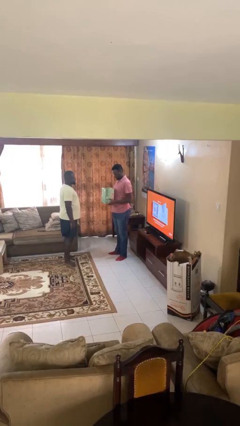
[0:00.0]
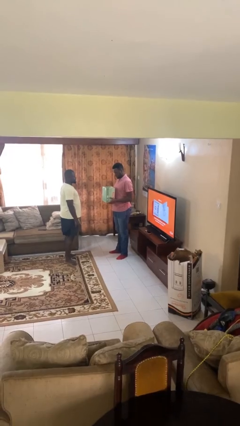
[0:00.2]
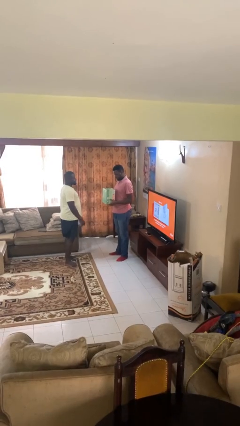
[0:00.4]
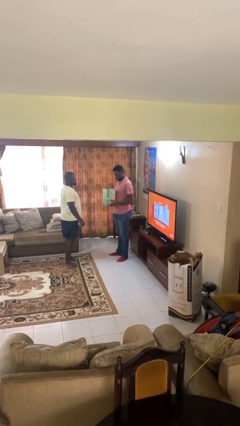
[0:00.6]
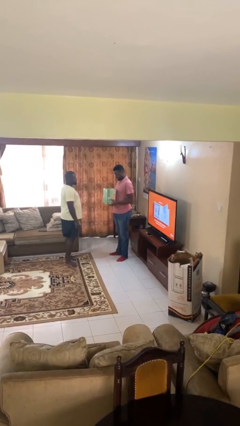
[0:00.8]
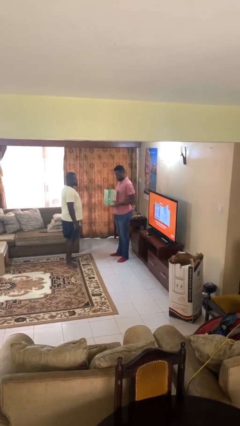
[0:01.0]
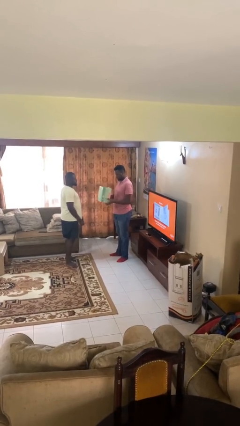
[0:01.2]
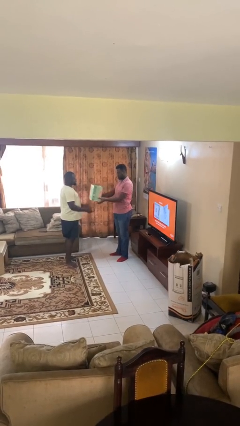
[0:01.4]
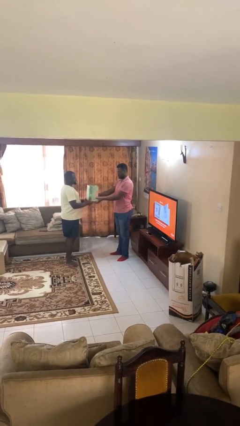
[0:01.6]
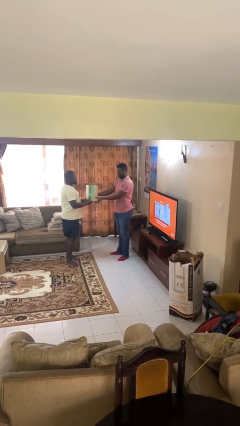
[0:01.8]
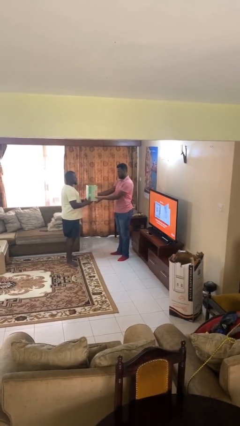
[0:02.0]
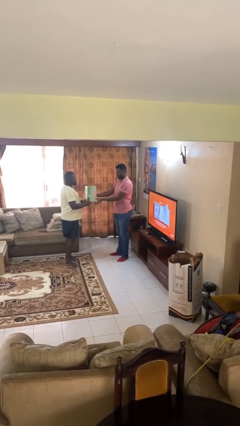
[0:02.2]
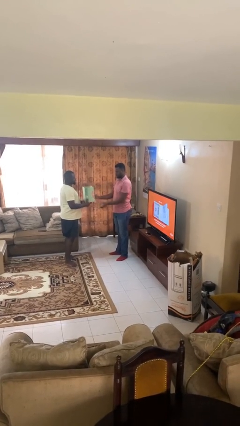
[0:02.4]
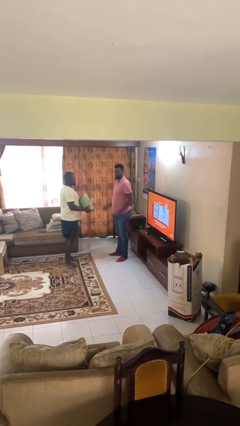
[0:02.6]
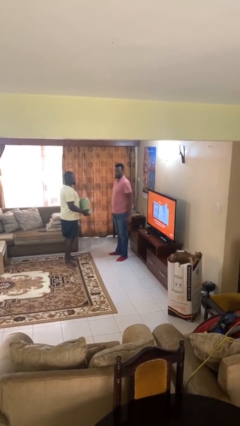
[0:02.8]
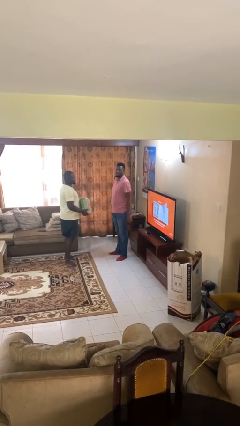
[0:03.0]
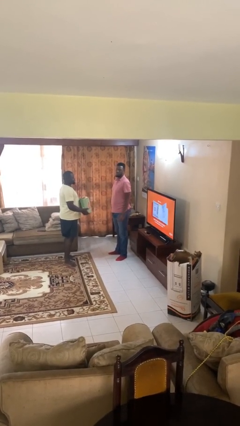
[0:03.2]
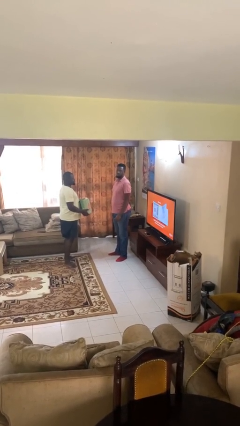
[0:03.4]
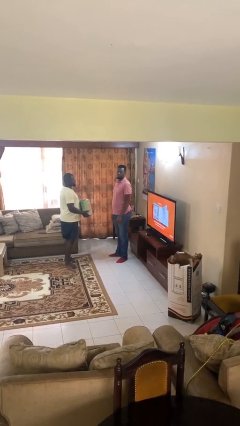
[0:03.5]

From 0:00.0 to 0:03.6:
person transfers object to person

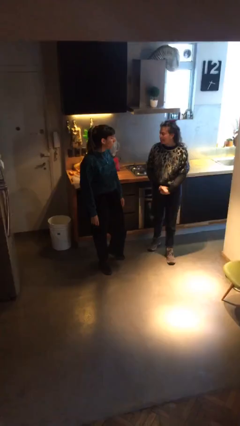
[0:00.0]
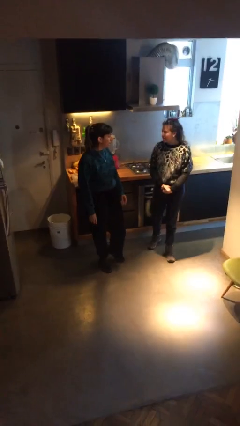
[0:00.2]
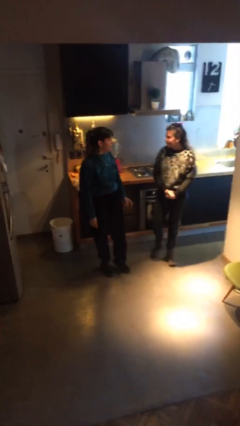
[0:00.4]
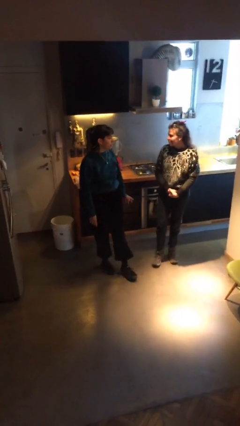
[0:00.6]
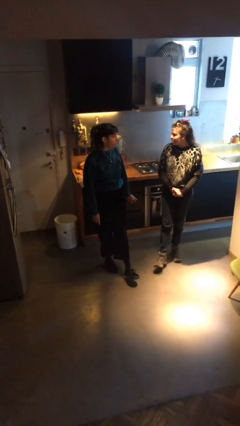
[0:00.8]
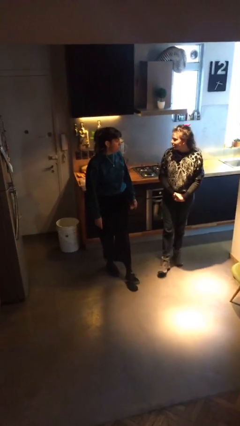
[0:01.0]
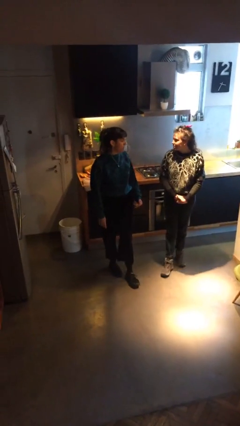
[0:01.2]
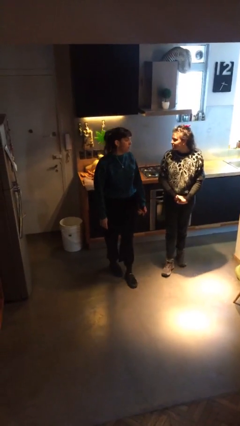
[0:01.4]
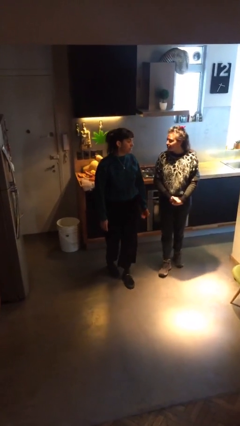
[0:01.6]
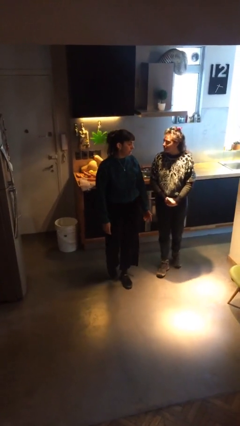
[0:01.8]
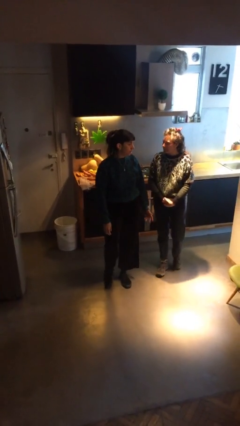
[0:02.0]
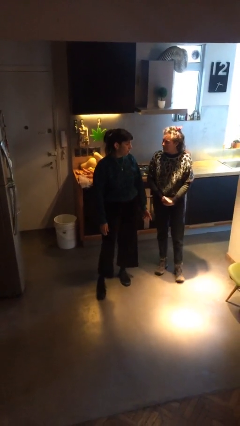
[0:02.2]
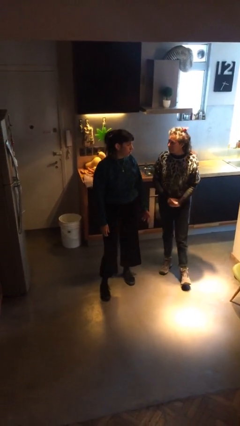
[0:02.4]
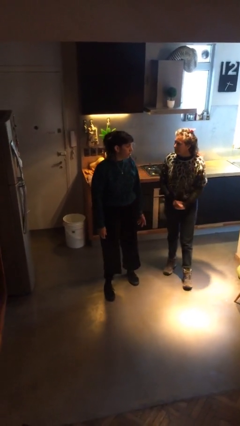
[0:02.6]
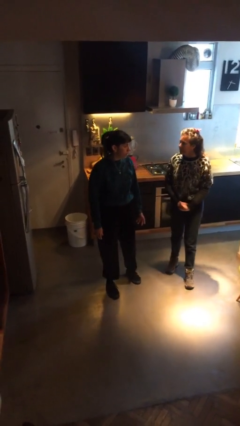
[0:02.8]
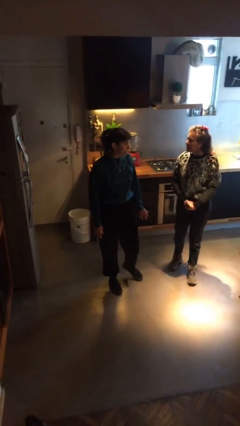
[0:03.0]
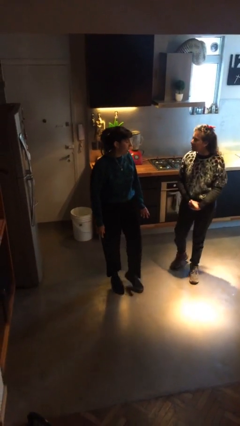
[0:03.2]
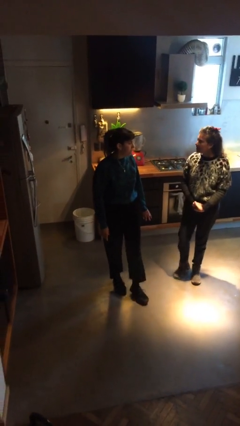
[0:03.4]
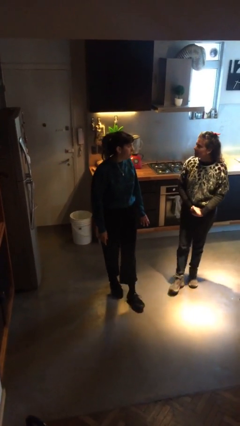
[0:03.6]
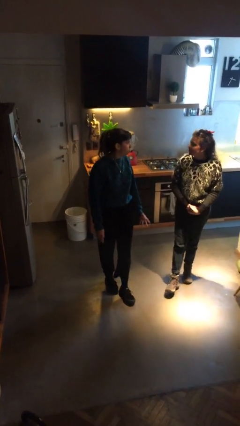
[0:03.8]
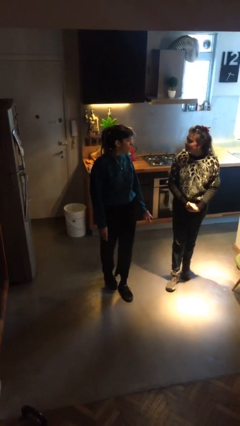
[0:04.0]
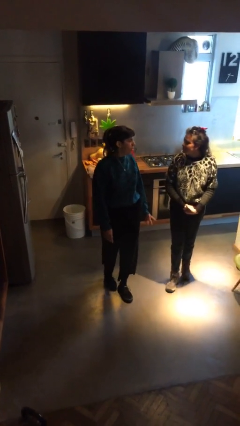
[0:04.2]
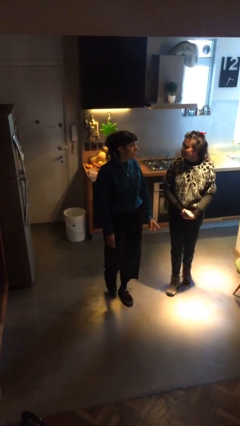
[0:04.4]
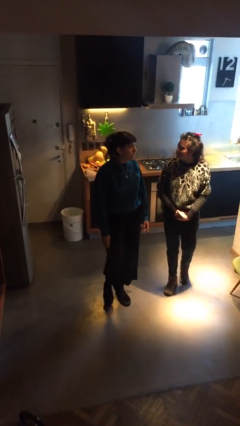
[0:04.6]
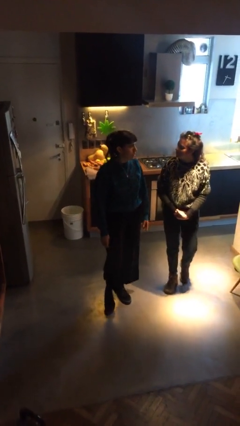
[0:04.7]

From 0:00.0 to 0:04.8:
person talks to person

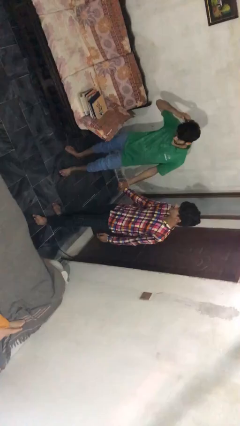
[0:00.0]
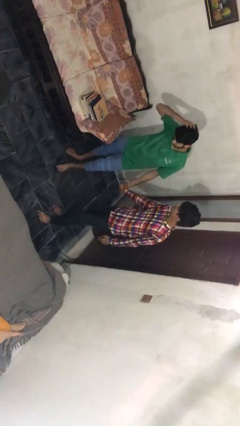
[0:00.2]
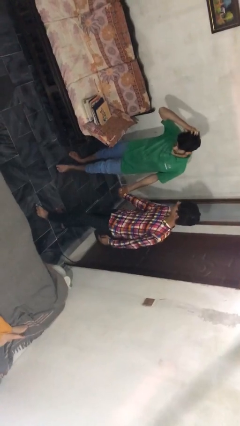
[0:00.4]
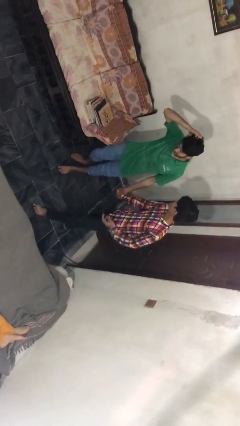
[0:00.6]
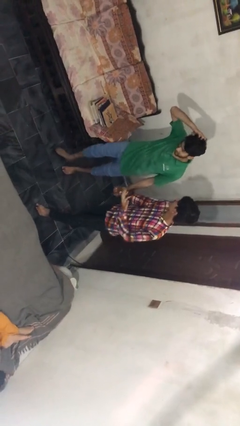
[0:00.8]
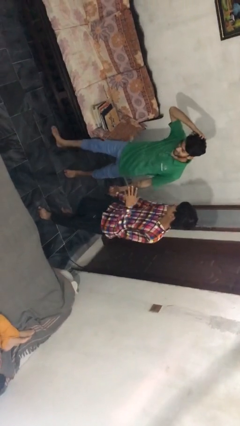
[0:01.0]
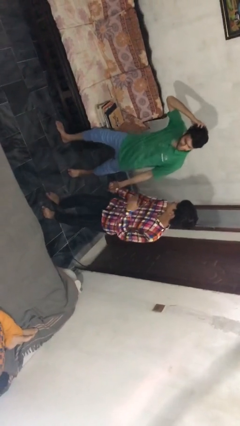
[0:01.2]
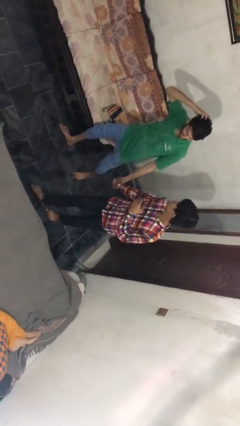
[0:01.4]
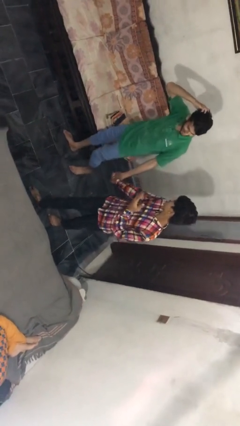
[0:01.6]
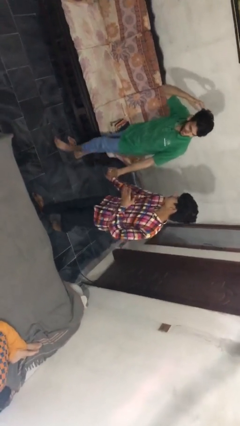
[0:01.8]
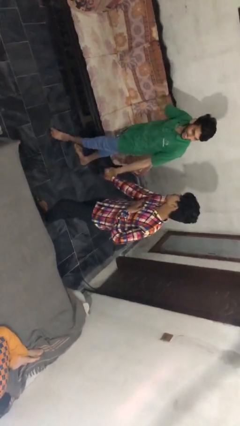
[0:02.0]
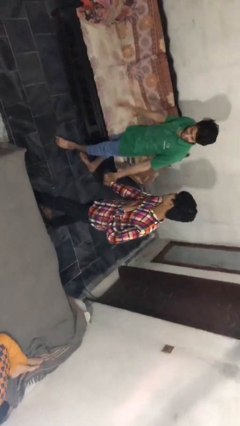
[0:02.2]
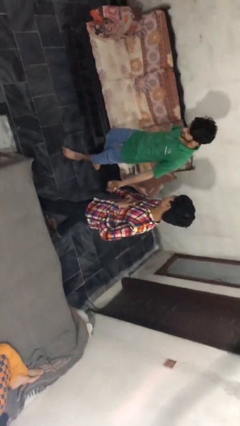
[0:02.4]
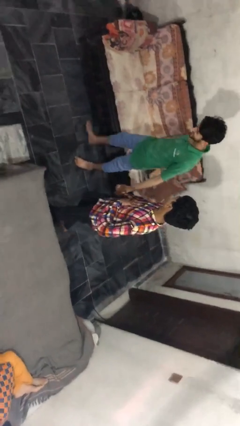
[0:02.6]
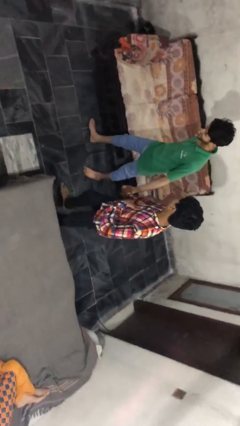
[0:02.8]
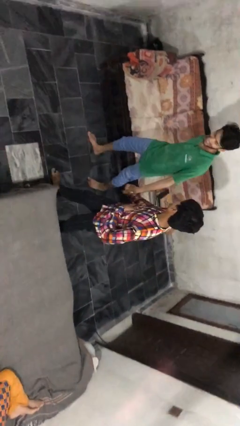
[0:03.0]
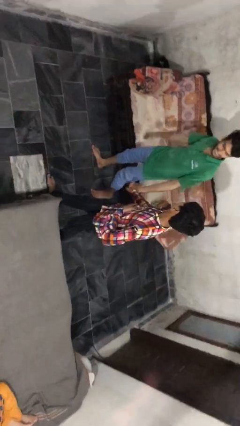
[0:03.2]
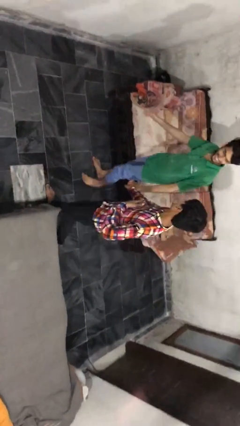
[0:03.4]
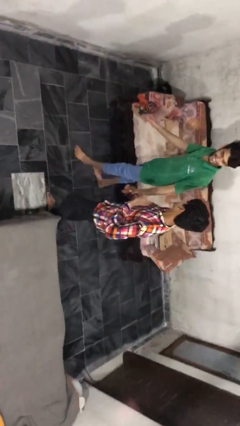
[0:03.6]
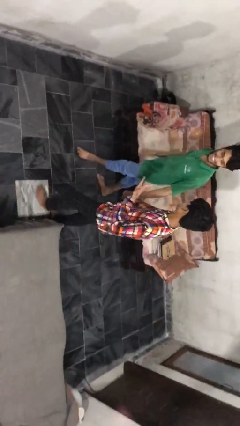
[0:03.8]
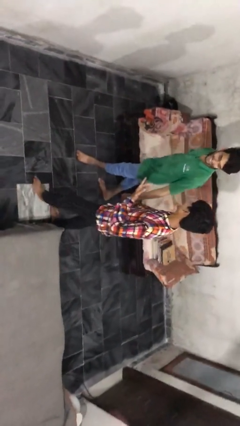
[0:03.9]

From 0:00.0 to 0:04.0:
person holds hand

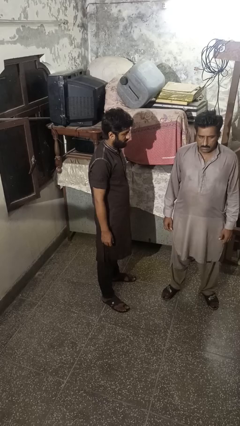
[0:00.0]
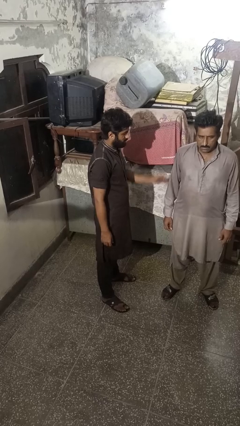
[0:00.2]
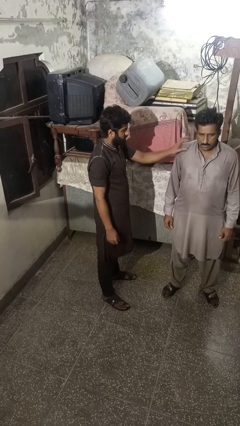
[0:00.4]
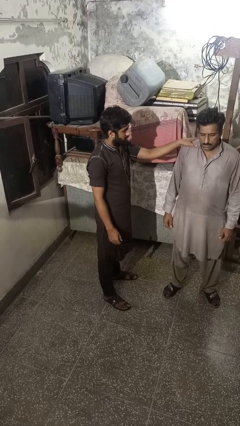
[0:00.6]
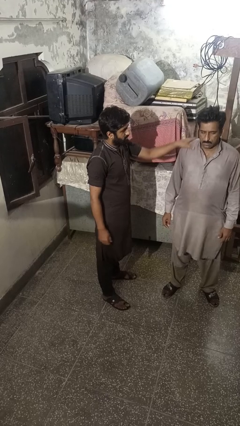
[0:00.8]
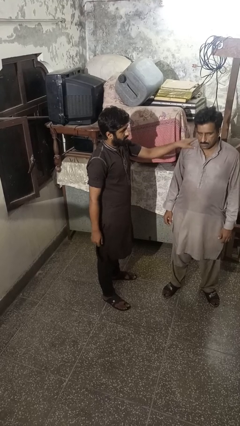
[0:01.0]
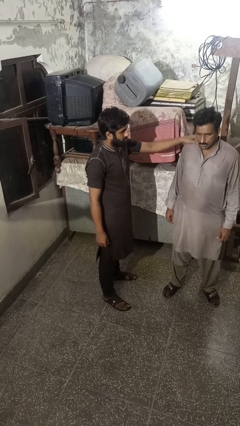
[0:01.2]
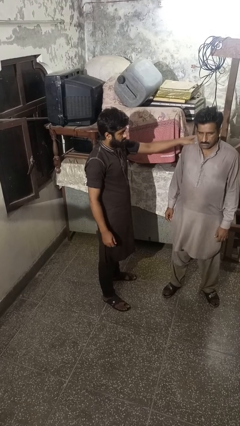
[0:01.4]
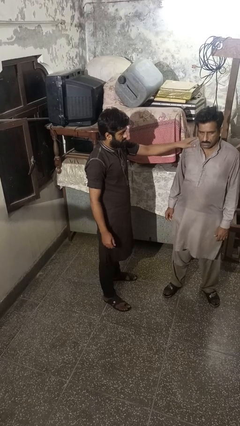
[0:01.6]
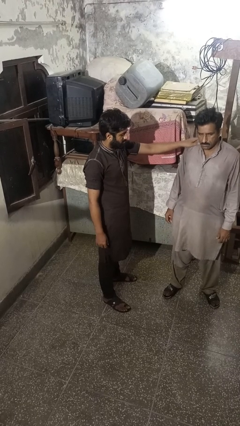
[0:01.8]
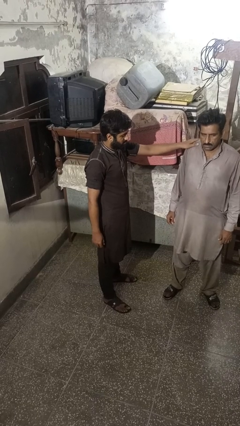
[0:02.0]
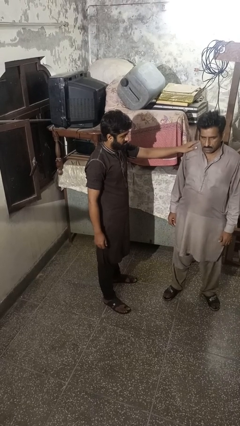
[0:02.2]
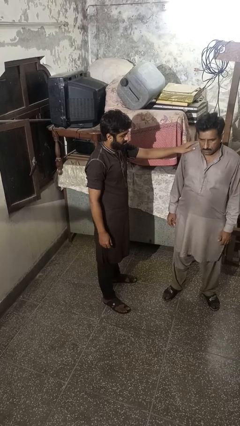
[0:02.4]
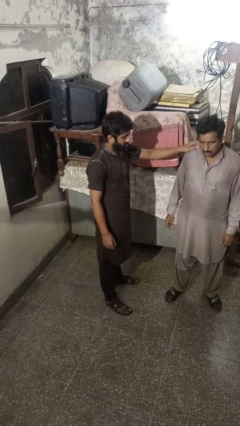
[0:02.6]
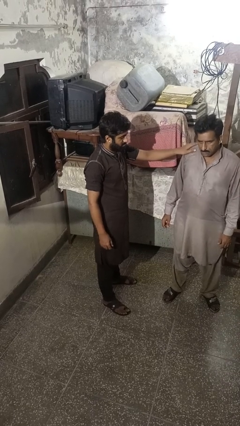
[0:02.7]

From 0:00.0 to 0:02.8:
person grabs person by shoulder

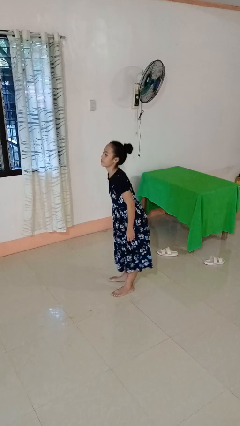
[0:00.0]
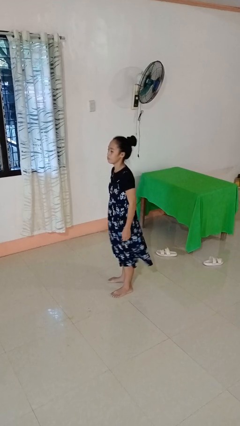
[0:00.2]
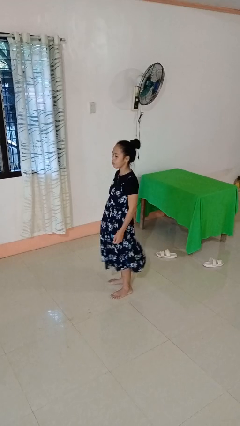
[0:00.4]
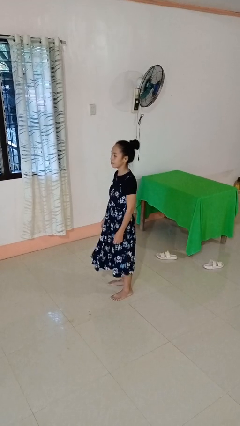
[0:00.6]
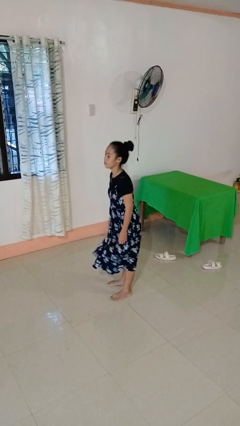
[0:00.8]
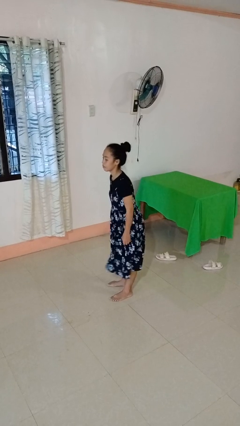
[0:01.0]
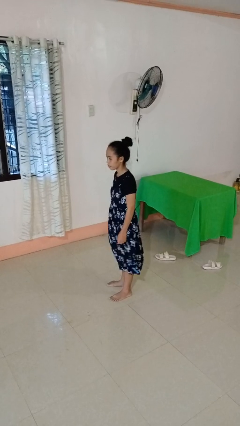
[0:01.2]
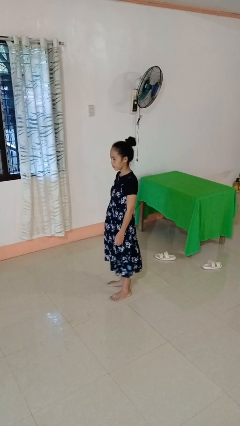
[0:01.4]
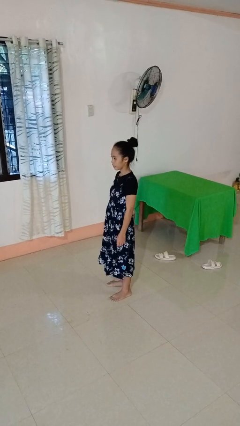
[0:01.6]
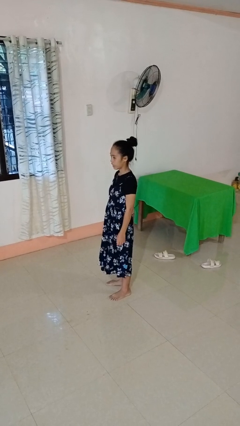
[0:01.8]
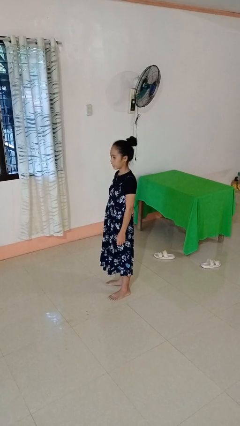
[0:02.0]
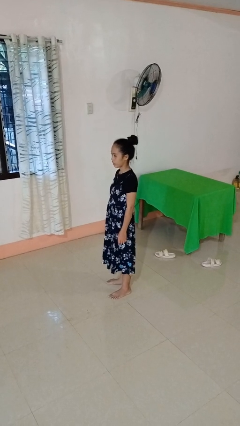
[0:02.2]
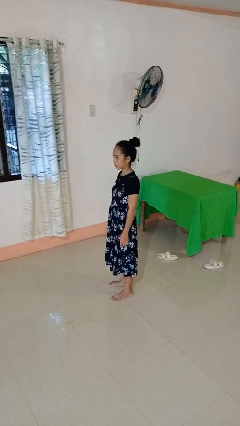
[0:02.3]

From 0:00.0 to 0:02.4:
person wiggles hips
